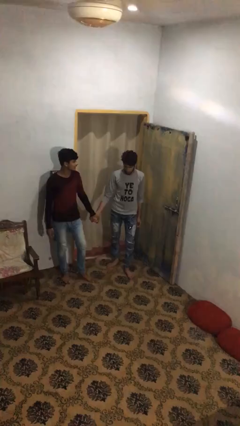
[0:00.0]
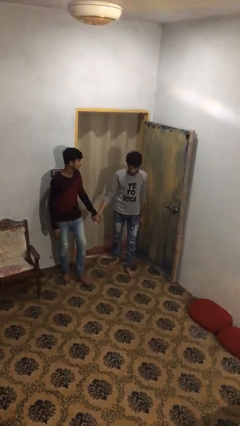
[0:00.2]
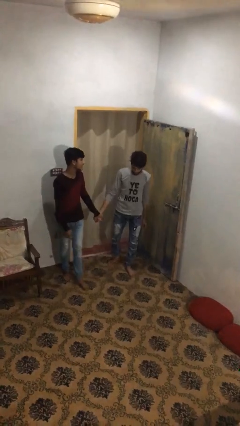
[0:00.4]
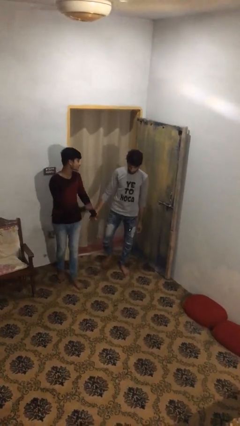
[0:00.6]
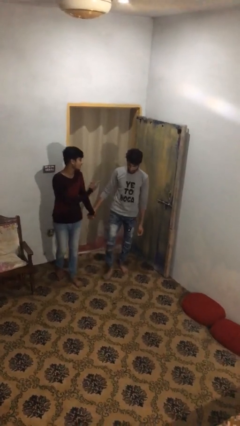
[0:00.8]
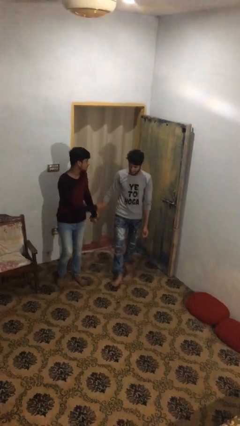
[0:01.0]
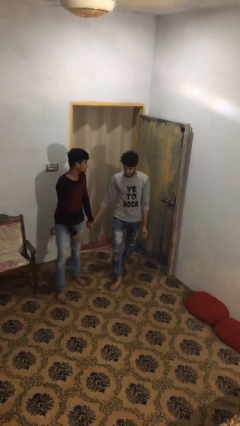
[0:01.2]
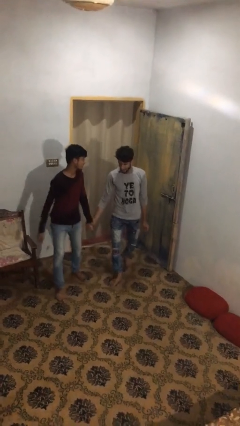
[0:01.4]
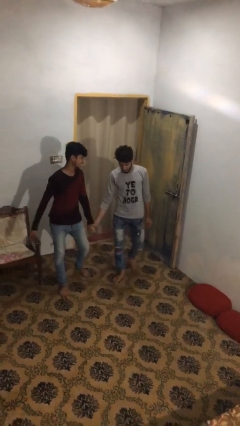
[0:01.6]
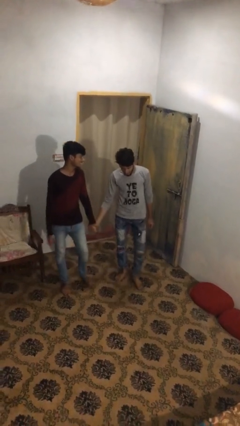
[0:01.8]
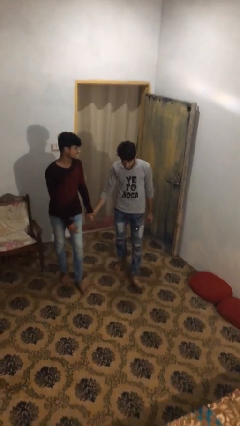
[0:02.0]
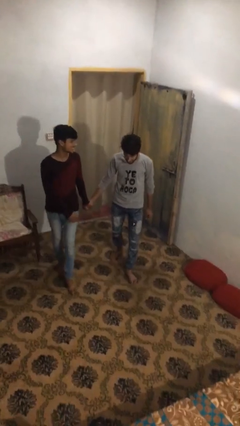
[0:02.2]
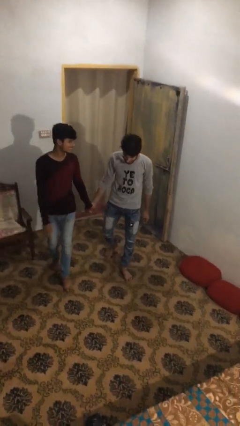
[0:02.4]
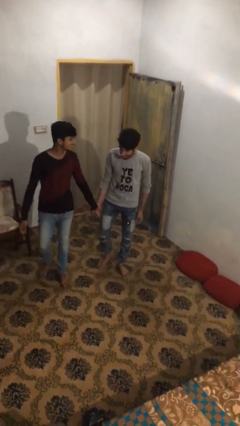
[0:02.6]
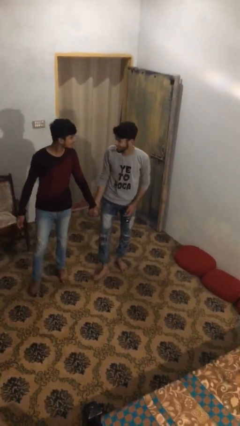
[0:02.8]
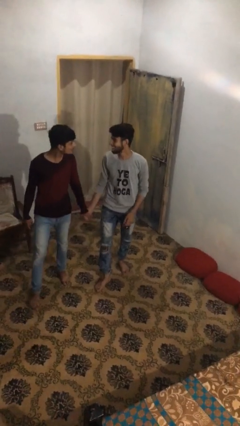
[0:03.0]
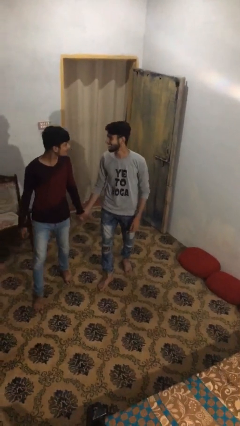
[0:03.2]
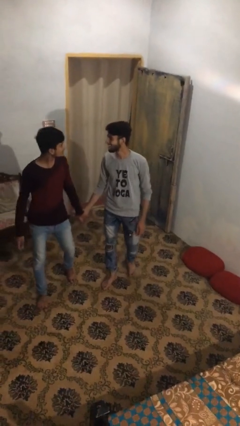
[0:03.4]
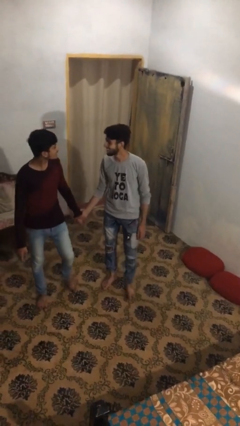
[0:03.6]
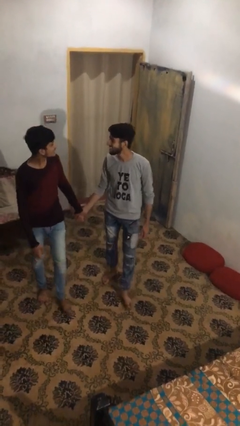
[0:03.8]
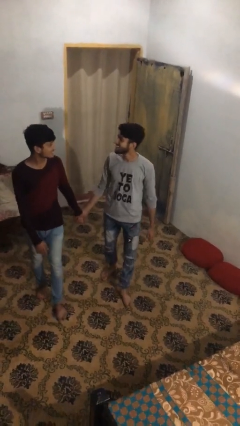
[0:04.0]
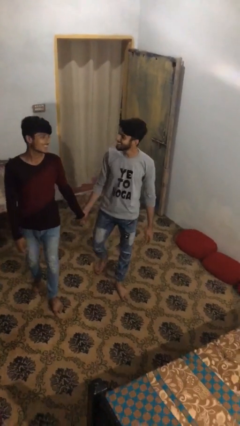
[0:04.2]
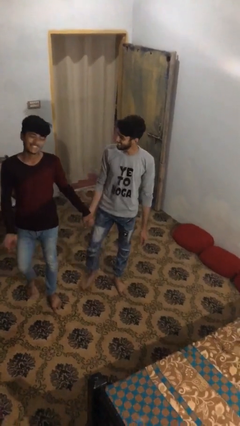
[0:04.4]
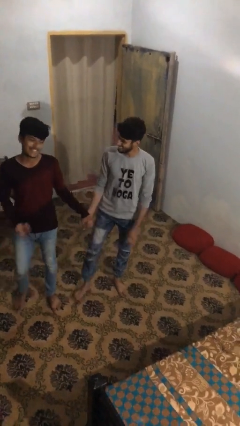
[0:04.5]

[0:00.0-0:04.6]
person holds hand

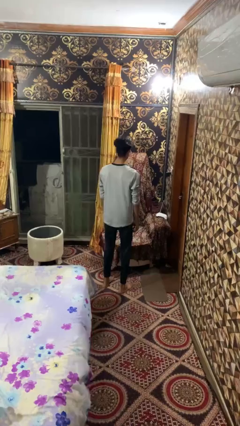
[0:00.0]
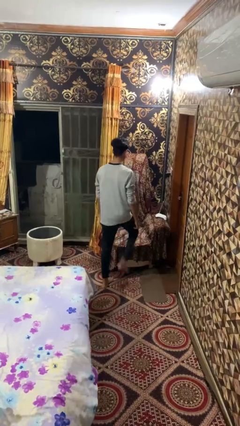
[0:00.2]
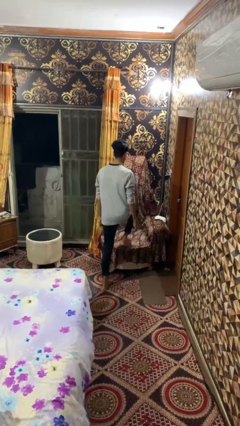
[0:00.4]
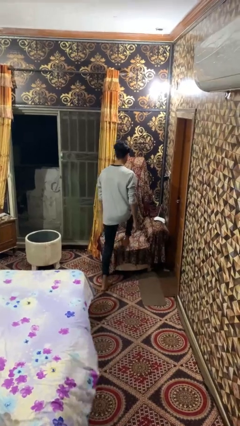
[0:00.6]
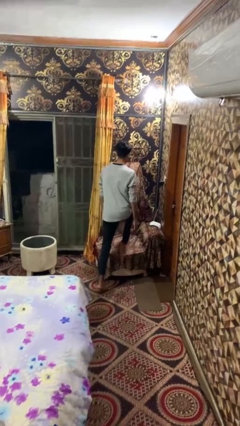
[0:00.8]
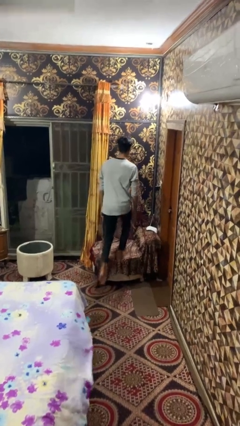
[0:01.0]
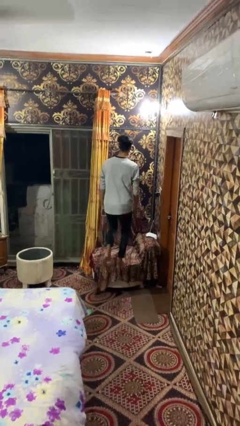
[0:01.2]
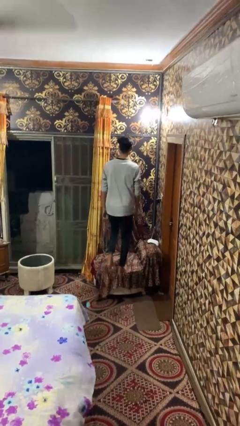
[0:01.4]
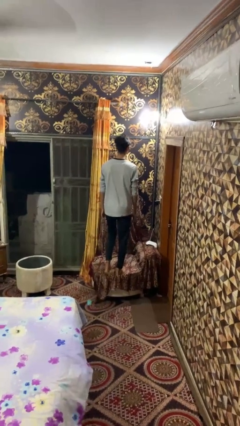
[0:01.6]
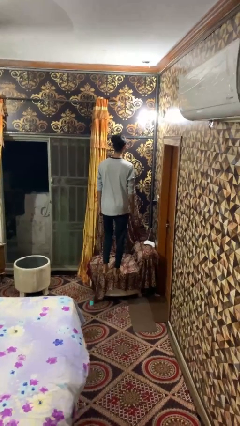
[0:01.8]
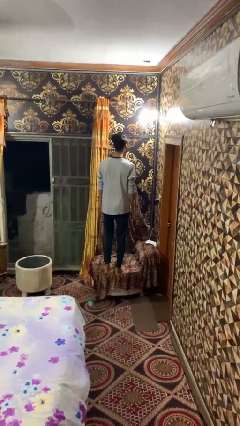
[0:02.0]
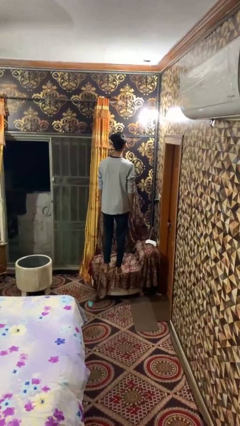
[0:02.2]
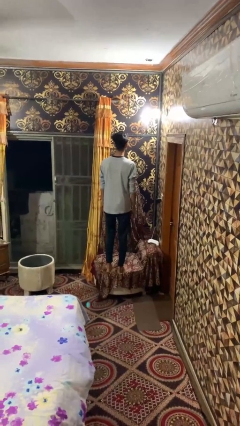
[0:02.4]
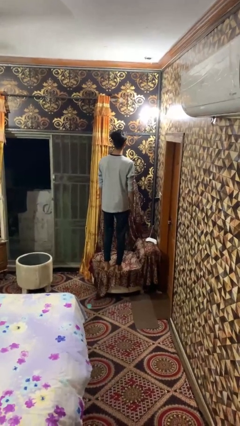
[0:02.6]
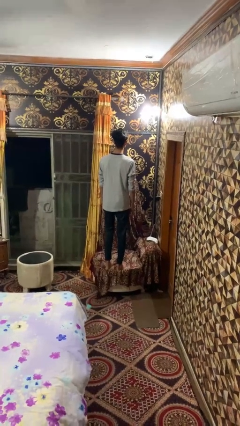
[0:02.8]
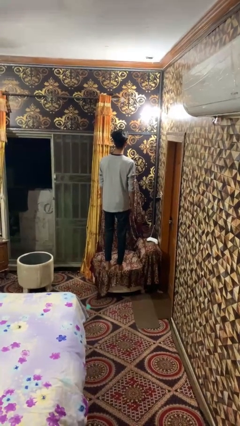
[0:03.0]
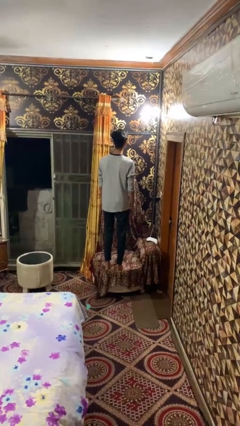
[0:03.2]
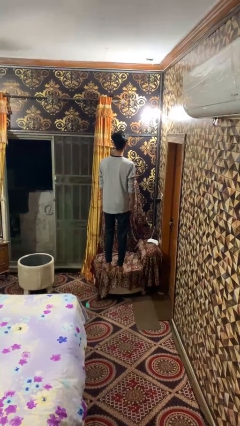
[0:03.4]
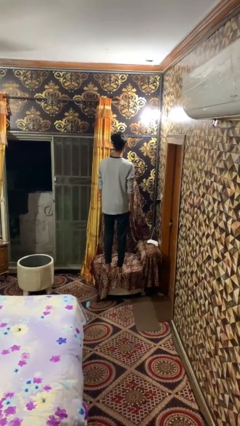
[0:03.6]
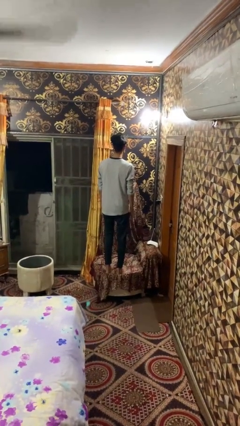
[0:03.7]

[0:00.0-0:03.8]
person climbs on couch

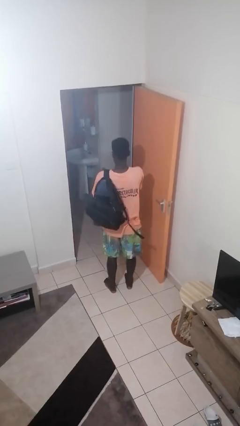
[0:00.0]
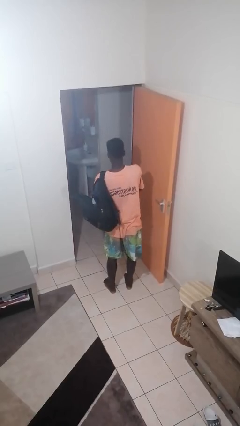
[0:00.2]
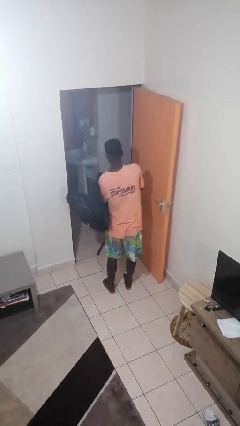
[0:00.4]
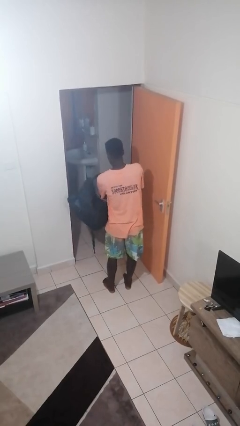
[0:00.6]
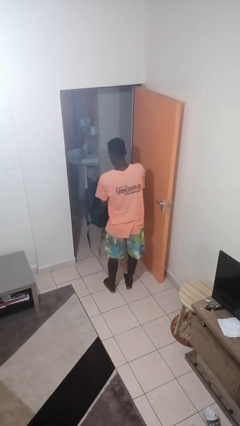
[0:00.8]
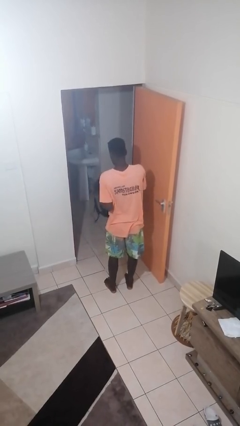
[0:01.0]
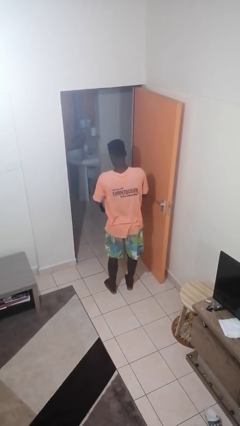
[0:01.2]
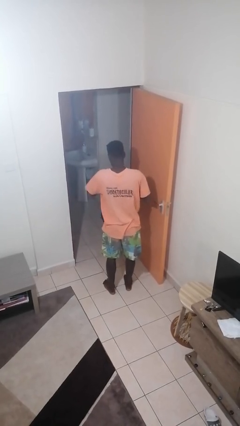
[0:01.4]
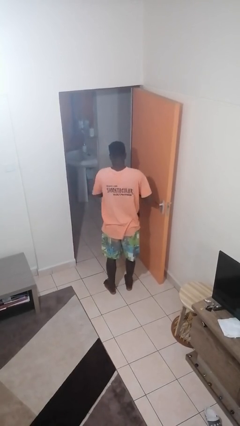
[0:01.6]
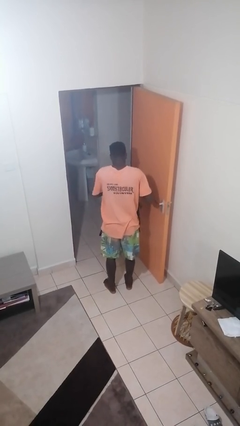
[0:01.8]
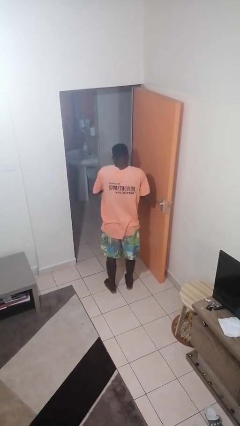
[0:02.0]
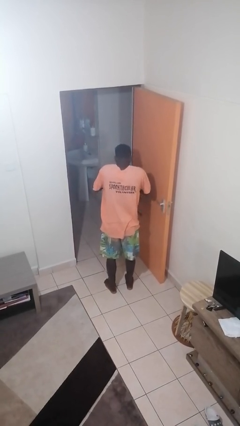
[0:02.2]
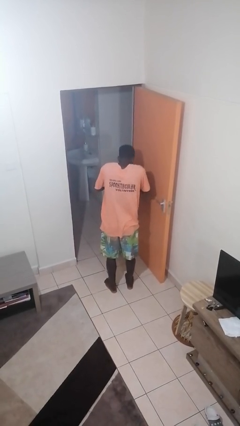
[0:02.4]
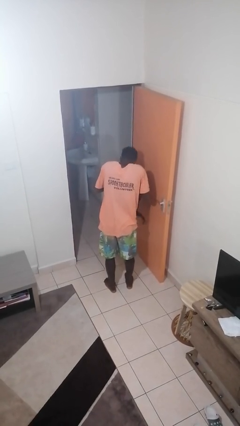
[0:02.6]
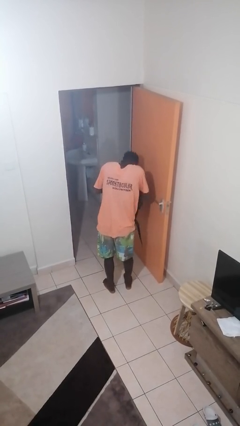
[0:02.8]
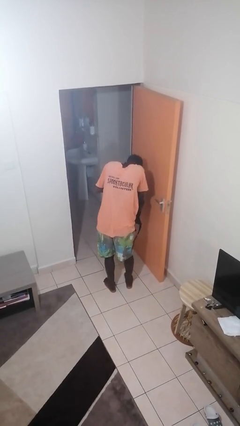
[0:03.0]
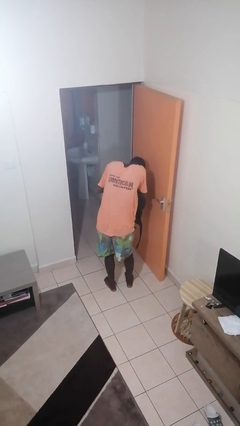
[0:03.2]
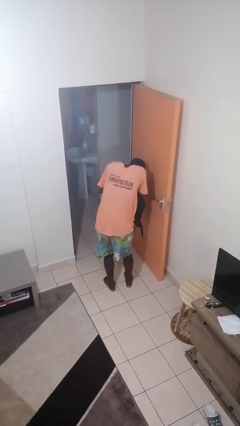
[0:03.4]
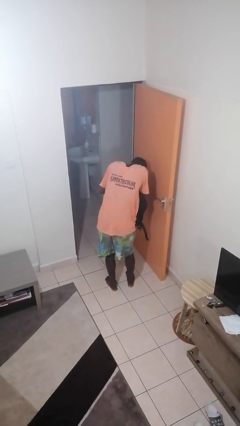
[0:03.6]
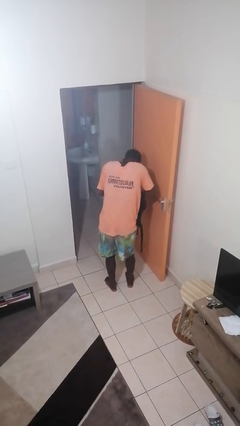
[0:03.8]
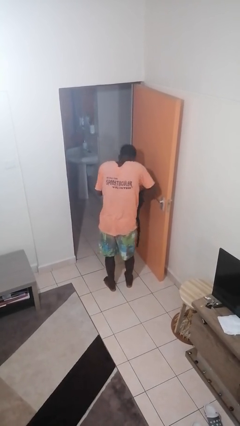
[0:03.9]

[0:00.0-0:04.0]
person searches in backpack

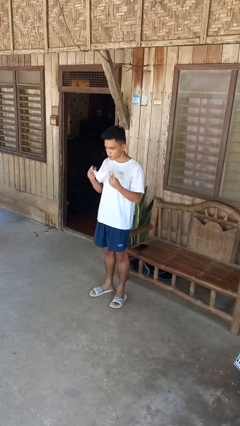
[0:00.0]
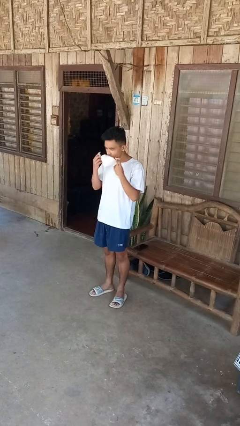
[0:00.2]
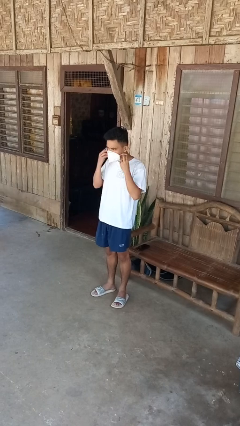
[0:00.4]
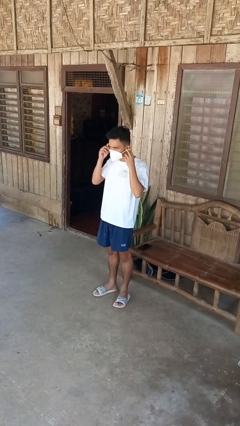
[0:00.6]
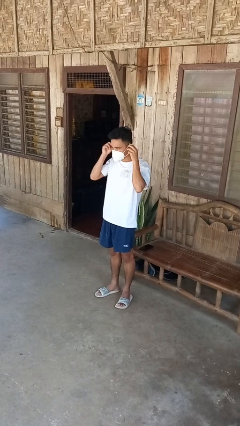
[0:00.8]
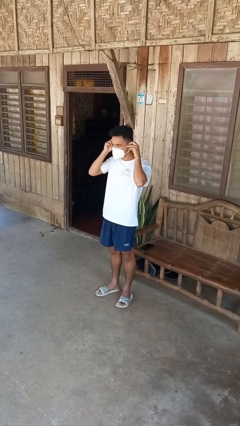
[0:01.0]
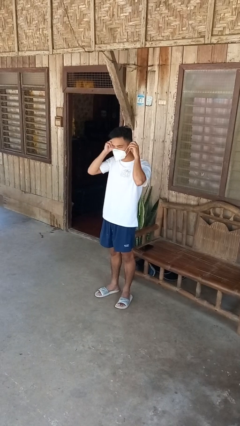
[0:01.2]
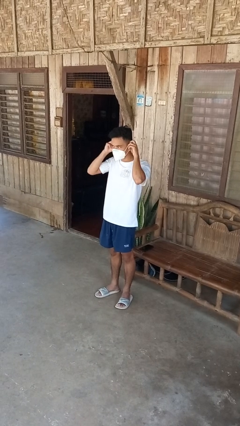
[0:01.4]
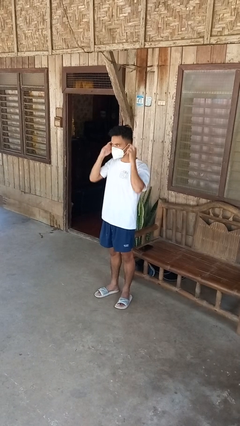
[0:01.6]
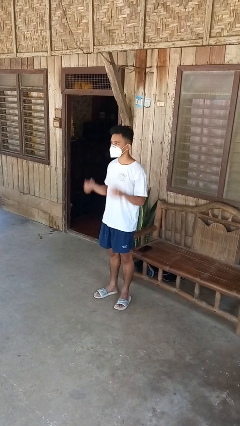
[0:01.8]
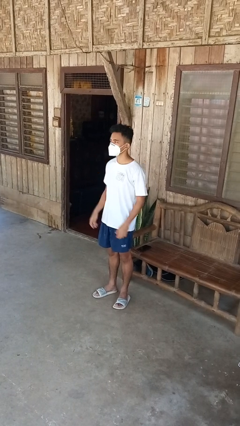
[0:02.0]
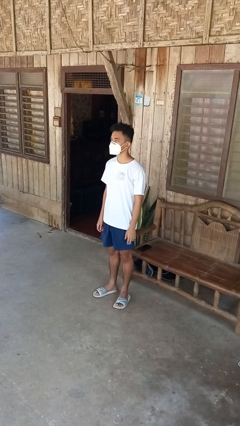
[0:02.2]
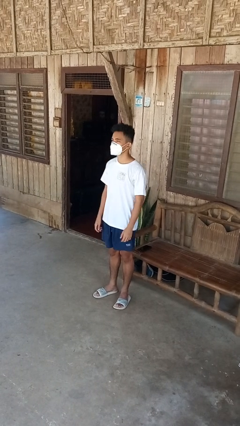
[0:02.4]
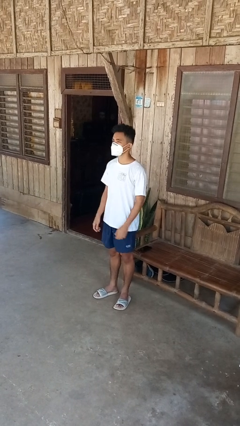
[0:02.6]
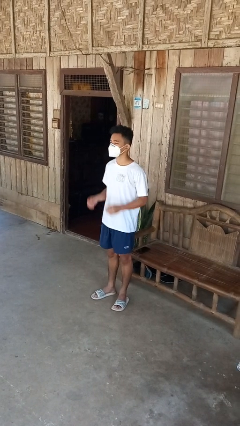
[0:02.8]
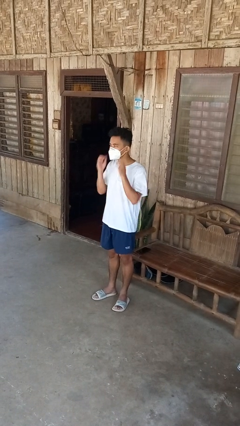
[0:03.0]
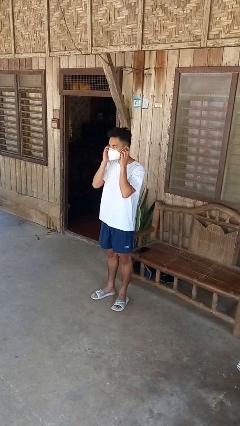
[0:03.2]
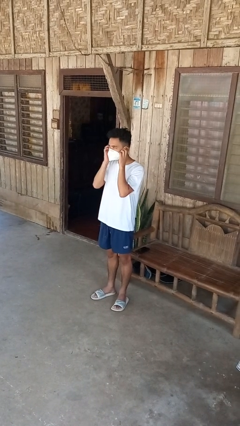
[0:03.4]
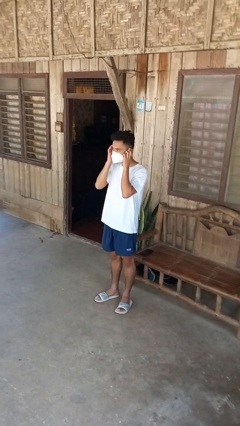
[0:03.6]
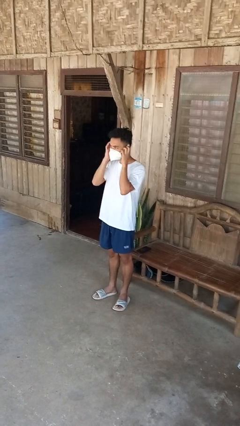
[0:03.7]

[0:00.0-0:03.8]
person puts on facemask

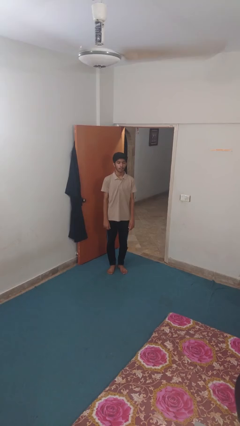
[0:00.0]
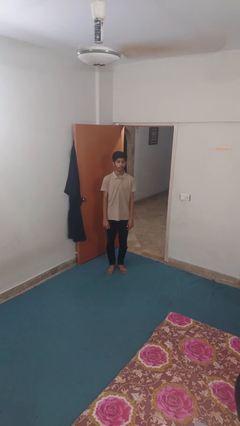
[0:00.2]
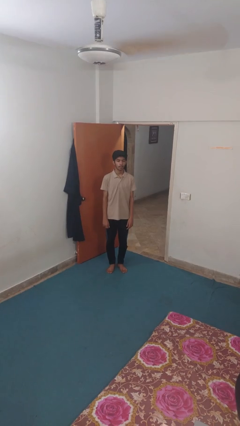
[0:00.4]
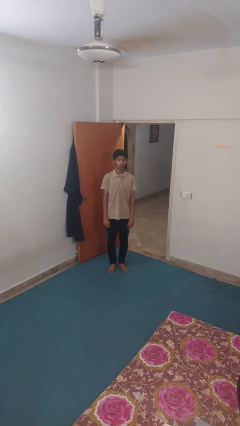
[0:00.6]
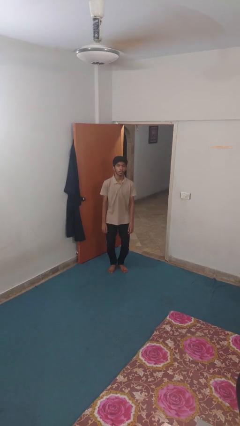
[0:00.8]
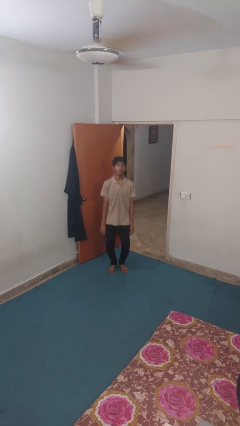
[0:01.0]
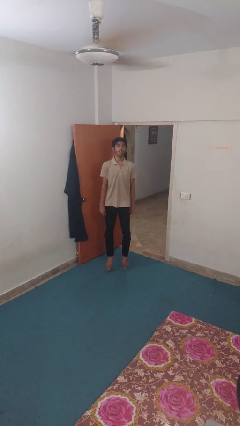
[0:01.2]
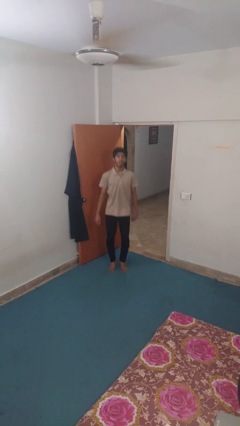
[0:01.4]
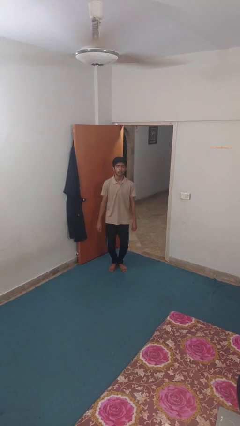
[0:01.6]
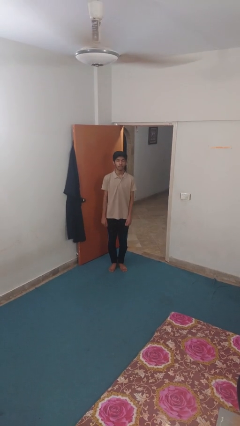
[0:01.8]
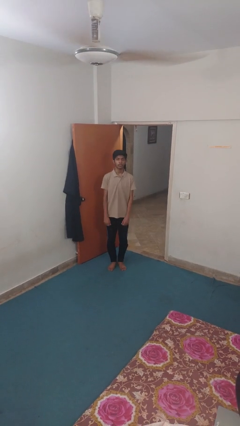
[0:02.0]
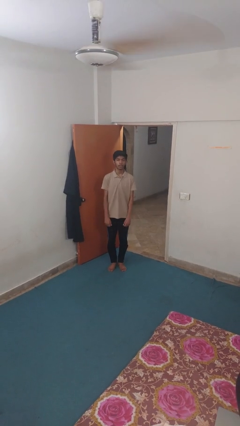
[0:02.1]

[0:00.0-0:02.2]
person jumps
